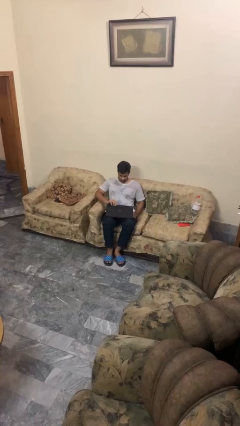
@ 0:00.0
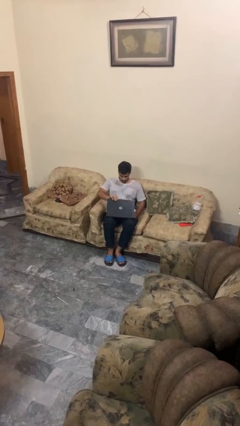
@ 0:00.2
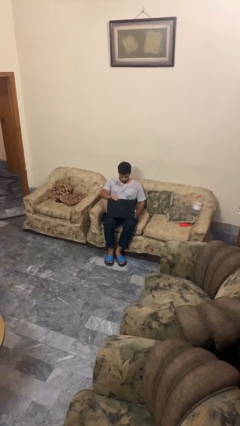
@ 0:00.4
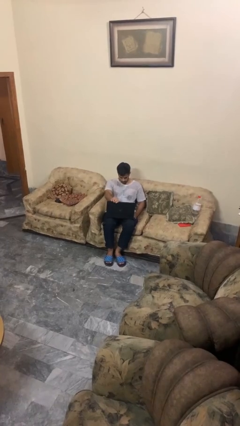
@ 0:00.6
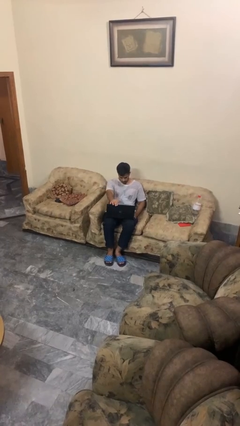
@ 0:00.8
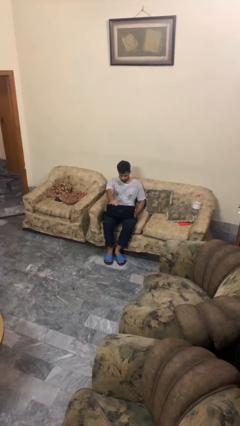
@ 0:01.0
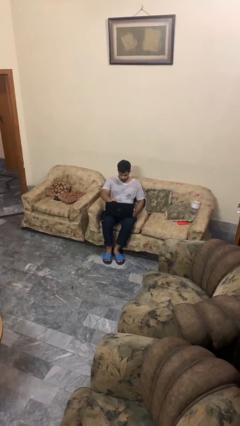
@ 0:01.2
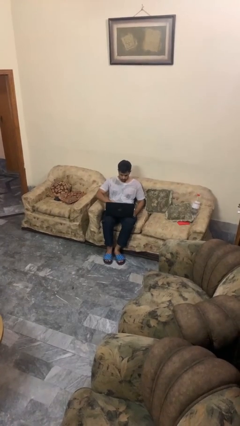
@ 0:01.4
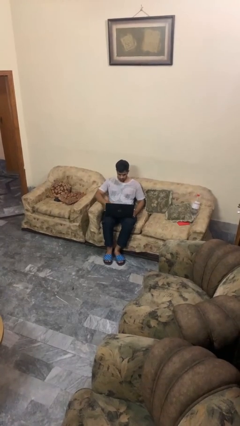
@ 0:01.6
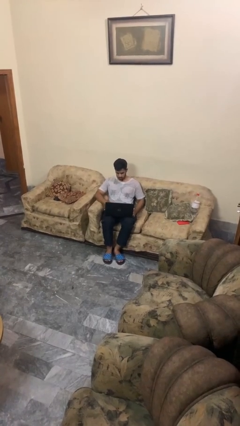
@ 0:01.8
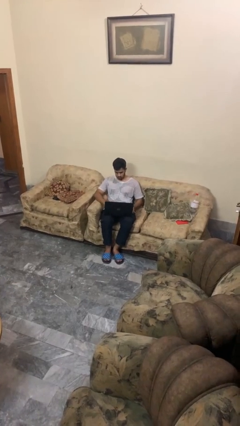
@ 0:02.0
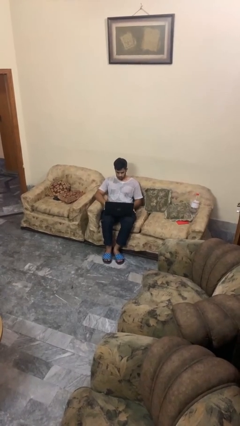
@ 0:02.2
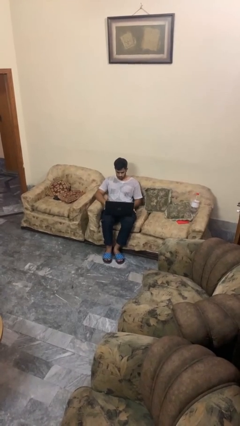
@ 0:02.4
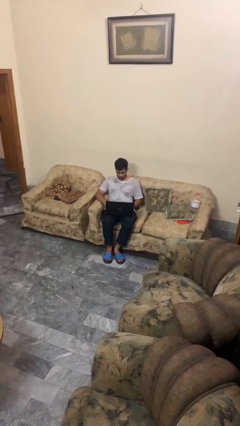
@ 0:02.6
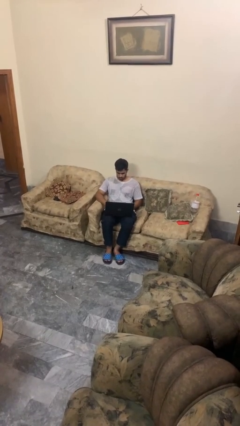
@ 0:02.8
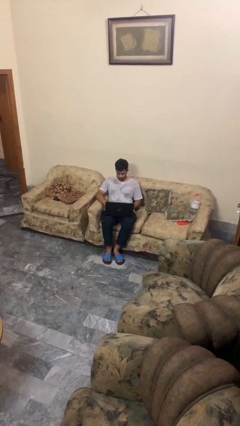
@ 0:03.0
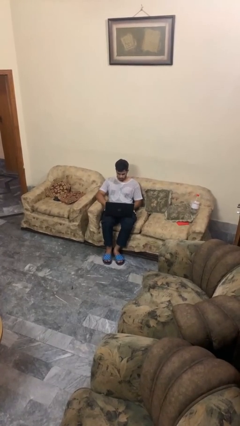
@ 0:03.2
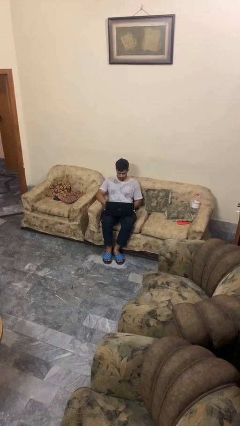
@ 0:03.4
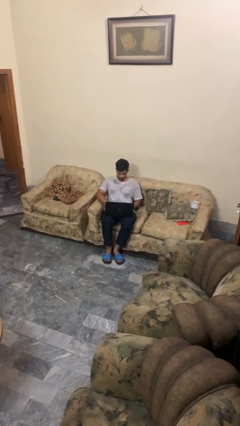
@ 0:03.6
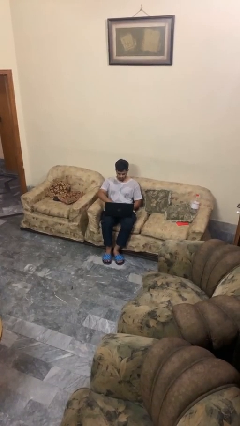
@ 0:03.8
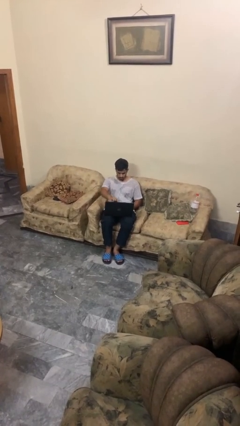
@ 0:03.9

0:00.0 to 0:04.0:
person opens laptop

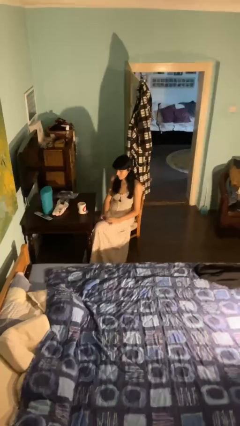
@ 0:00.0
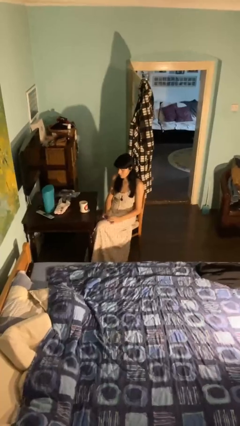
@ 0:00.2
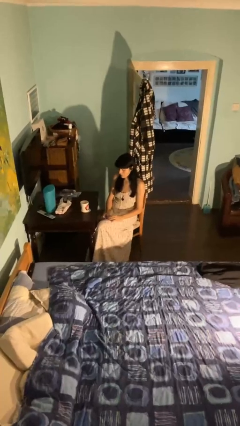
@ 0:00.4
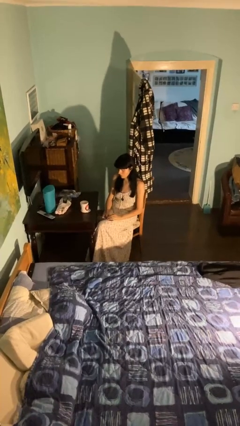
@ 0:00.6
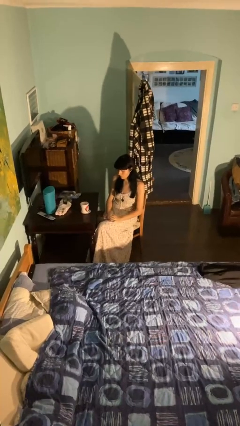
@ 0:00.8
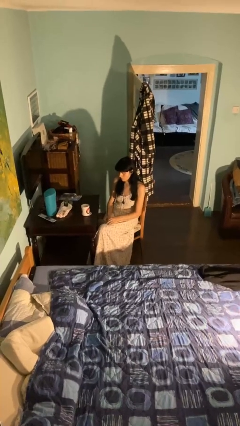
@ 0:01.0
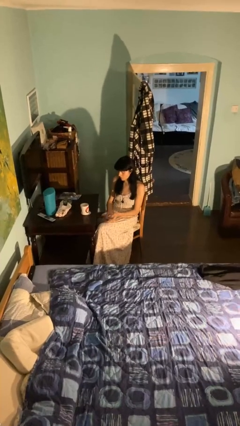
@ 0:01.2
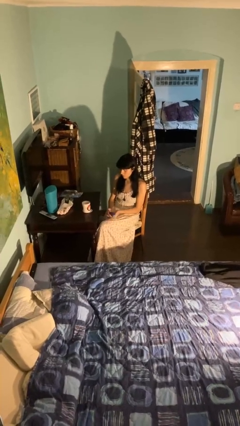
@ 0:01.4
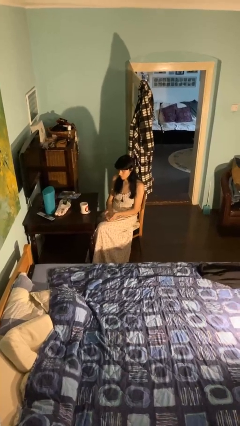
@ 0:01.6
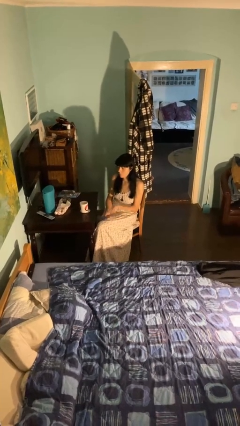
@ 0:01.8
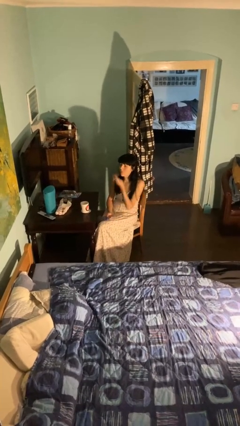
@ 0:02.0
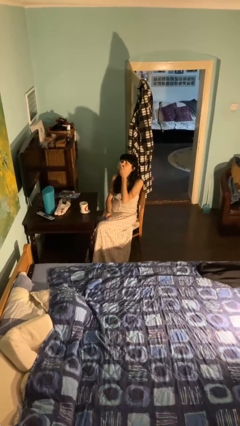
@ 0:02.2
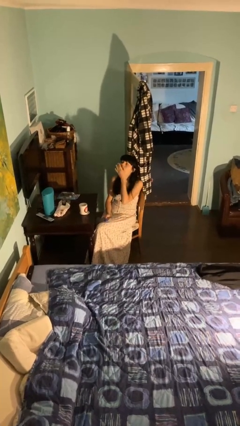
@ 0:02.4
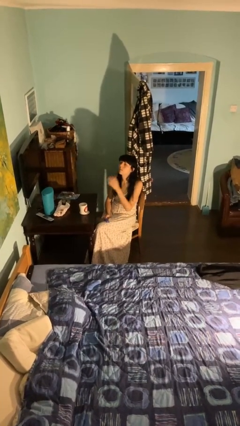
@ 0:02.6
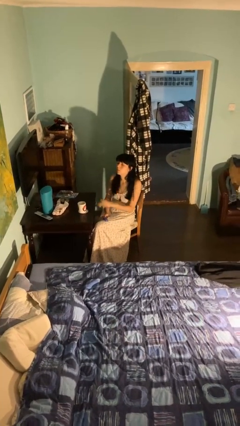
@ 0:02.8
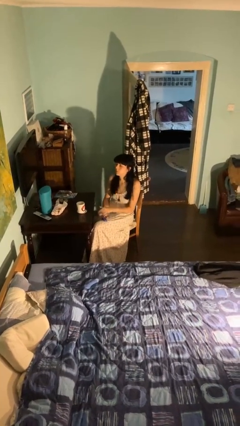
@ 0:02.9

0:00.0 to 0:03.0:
person takes medicine pills

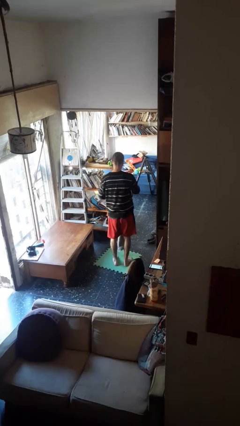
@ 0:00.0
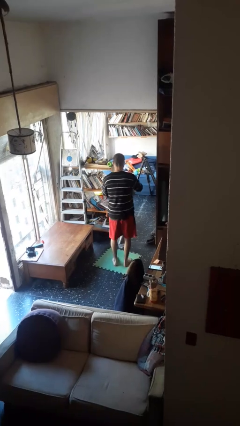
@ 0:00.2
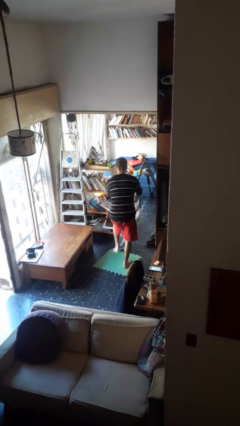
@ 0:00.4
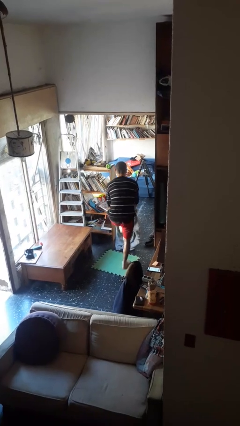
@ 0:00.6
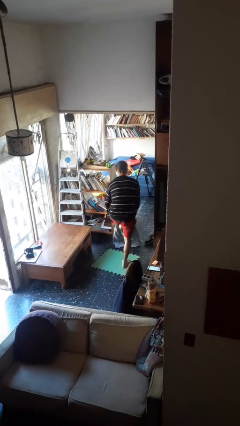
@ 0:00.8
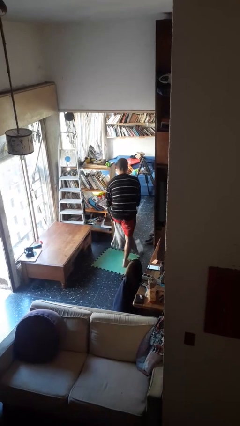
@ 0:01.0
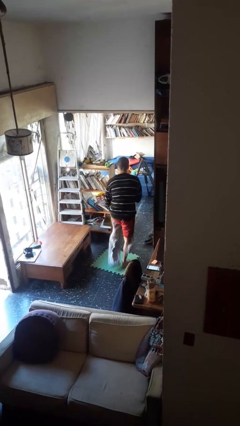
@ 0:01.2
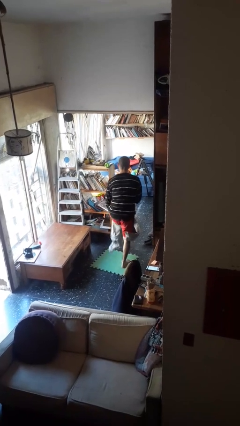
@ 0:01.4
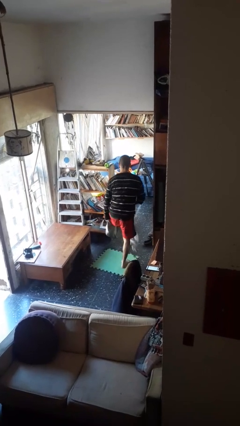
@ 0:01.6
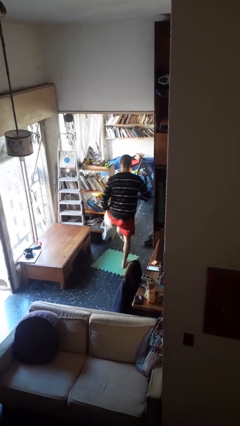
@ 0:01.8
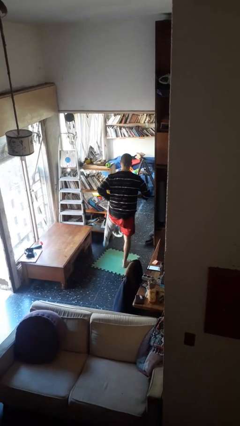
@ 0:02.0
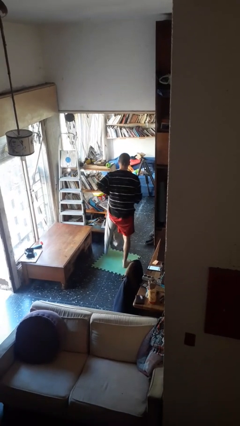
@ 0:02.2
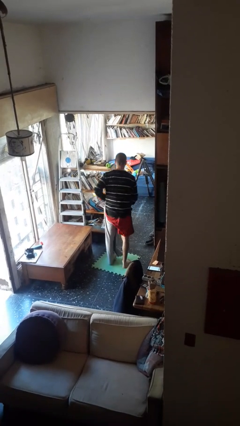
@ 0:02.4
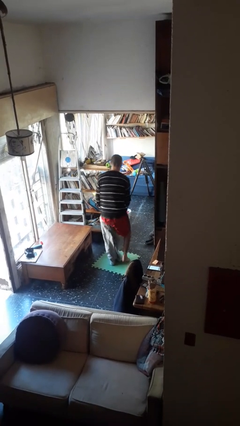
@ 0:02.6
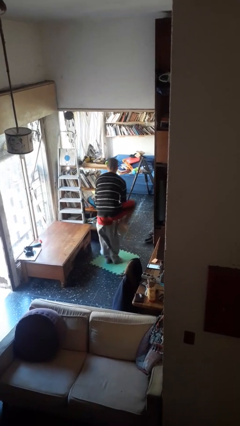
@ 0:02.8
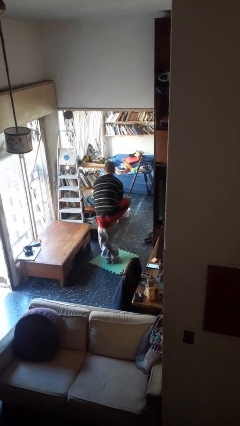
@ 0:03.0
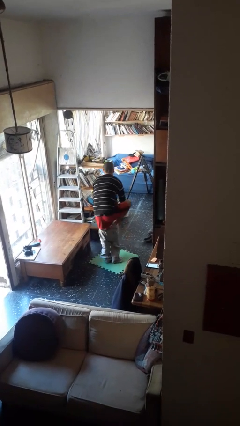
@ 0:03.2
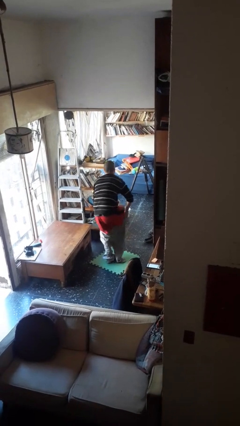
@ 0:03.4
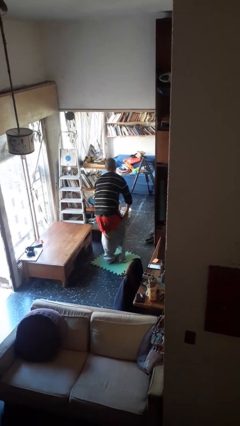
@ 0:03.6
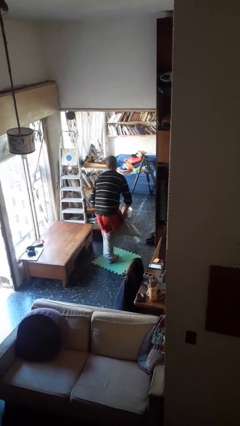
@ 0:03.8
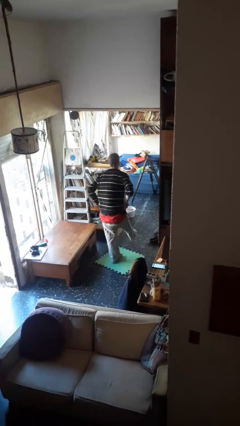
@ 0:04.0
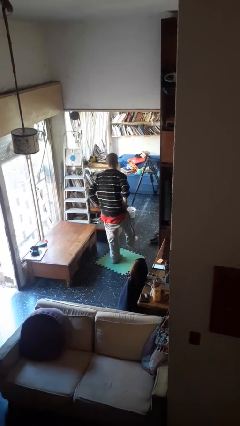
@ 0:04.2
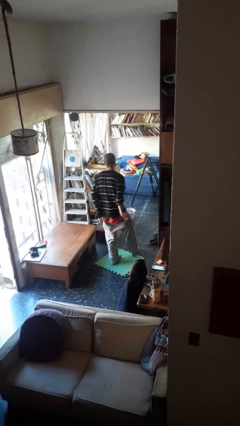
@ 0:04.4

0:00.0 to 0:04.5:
person puts on pants

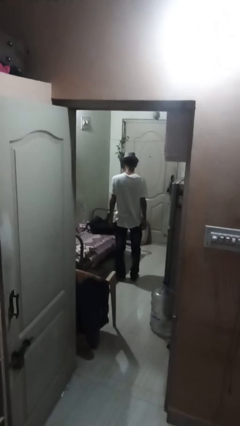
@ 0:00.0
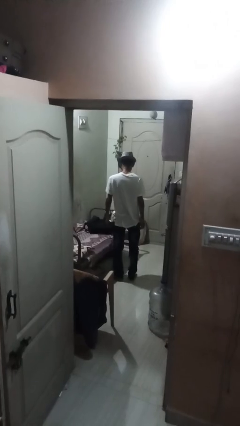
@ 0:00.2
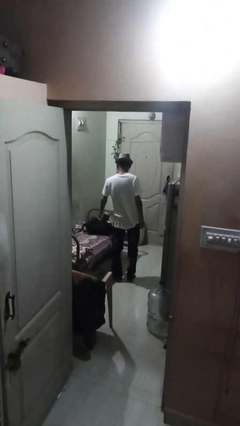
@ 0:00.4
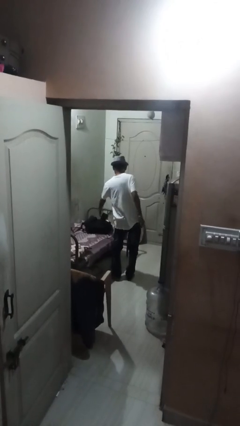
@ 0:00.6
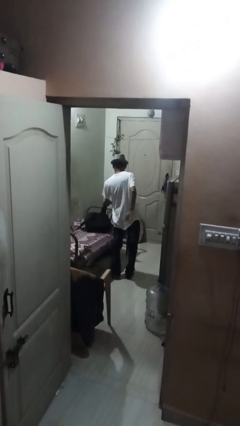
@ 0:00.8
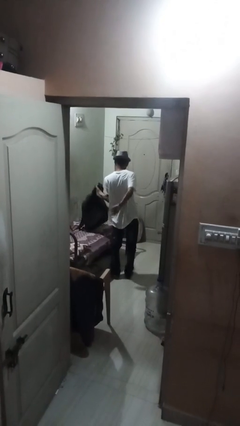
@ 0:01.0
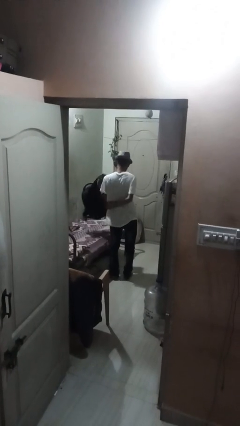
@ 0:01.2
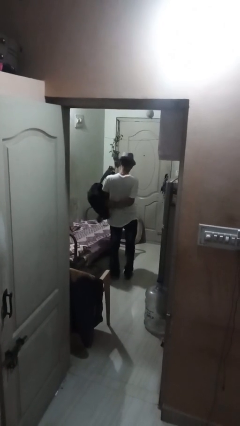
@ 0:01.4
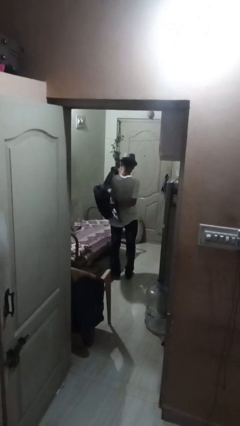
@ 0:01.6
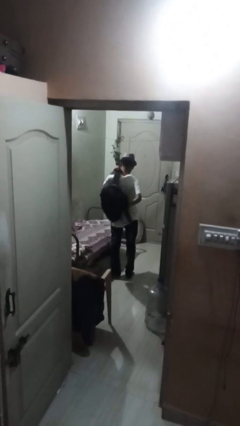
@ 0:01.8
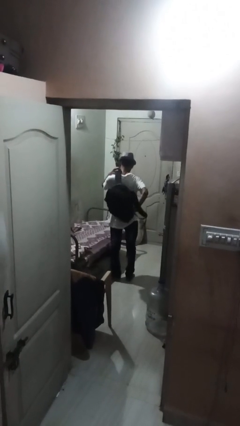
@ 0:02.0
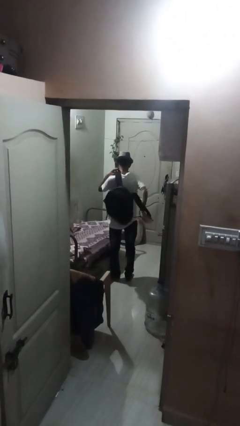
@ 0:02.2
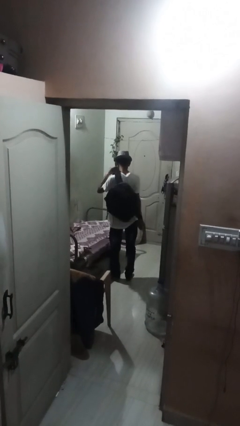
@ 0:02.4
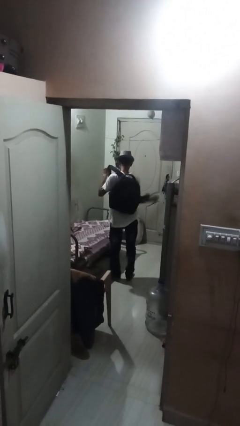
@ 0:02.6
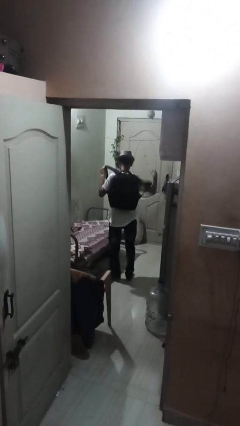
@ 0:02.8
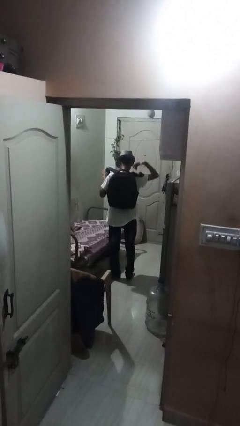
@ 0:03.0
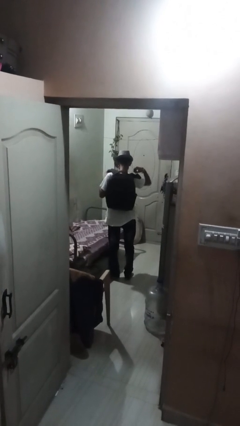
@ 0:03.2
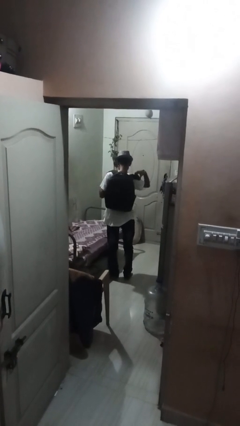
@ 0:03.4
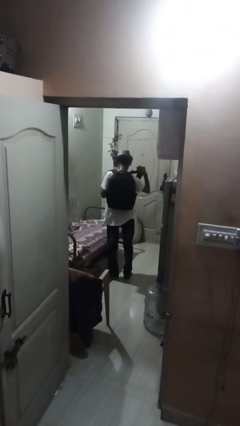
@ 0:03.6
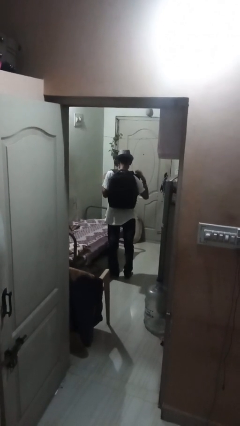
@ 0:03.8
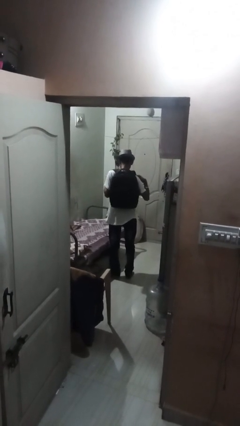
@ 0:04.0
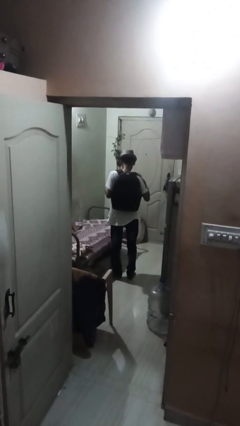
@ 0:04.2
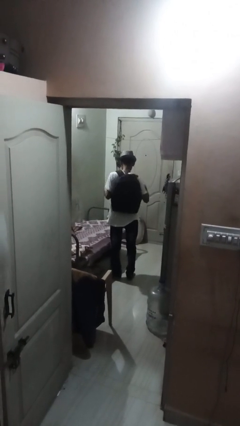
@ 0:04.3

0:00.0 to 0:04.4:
person puts on backpack

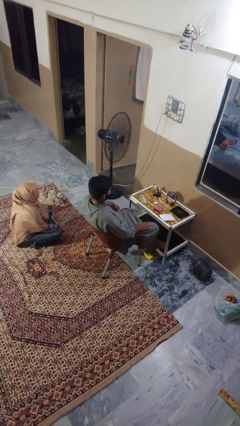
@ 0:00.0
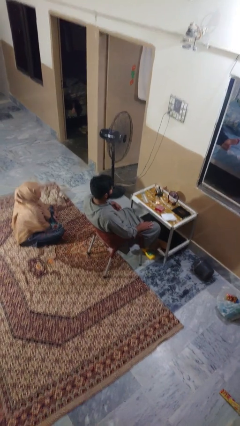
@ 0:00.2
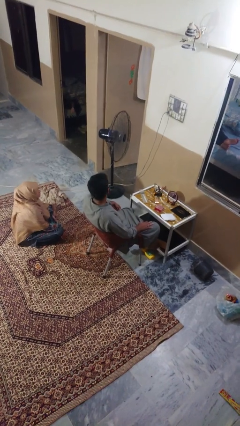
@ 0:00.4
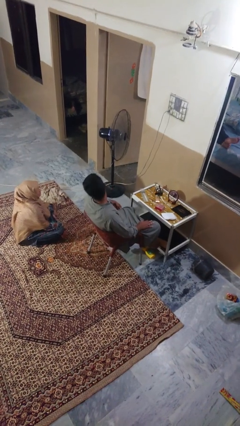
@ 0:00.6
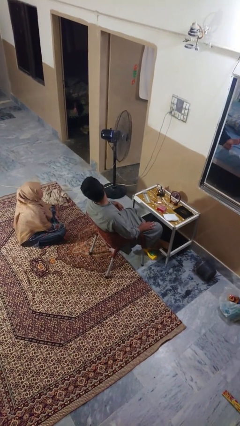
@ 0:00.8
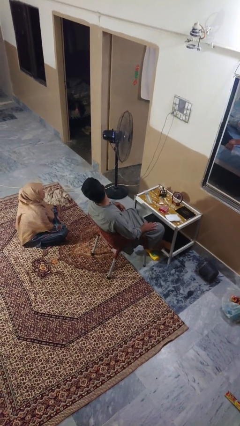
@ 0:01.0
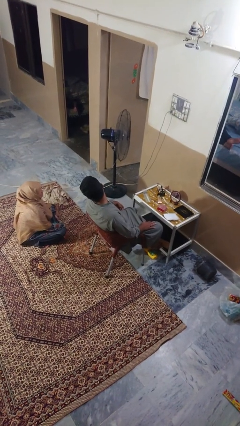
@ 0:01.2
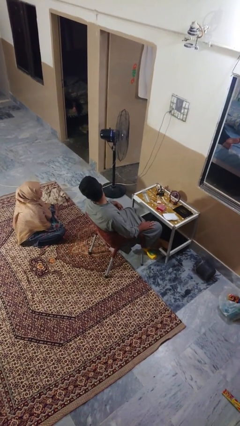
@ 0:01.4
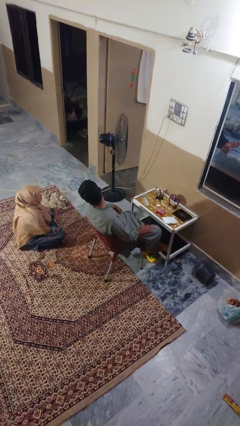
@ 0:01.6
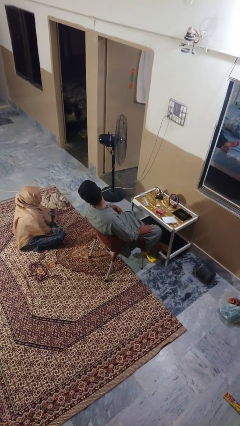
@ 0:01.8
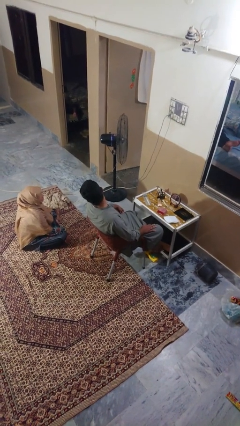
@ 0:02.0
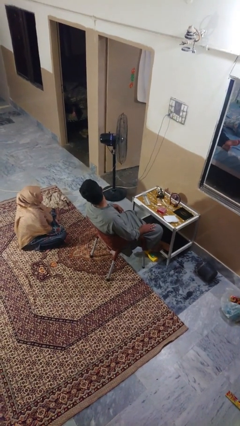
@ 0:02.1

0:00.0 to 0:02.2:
person looks over shoulder
